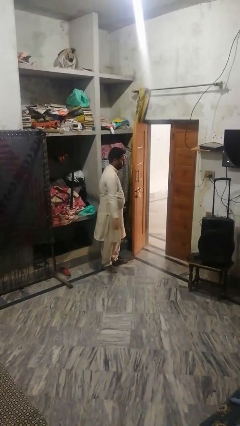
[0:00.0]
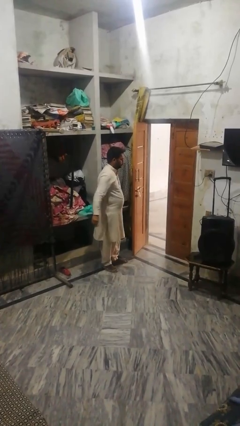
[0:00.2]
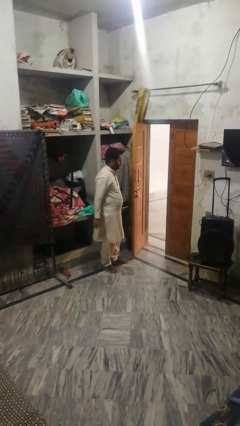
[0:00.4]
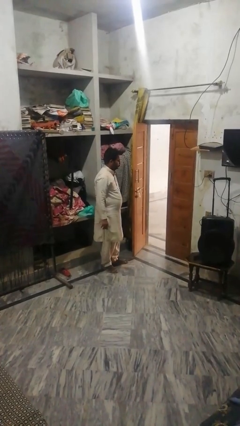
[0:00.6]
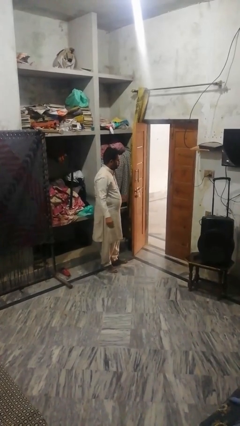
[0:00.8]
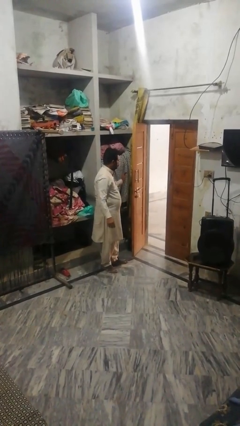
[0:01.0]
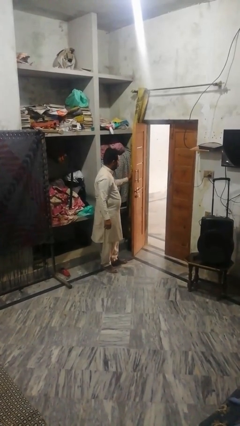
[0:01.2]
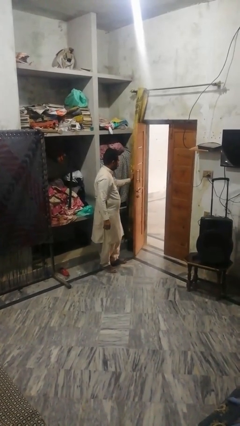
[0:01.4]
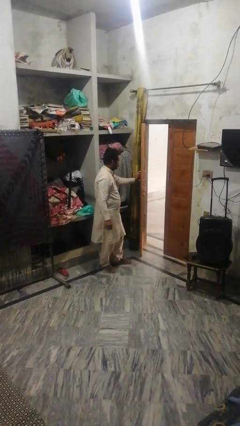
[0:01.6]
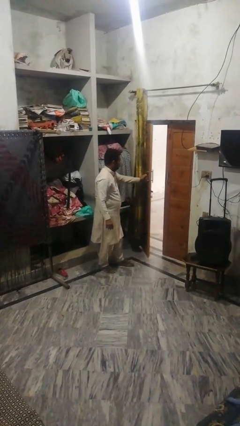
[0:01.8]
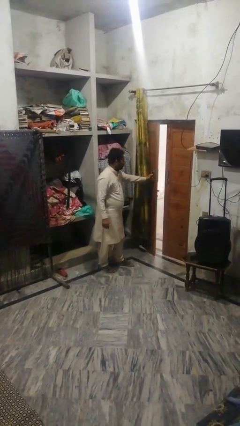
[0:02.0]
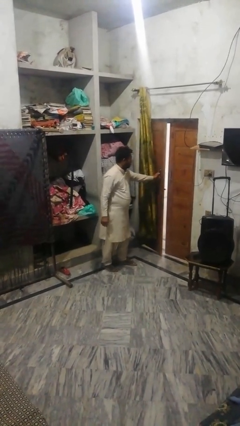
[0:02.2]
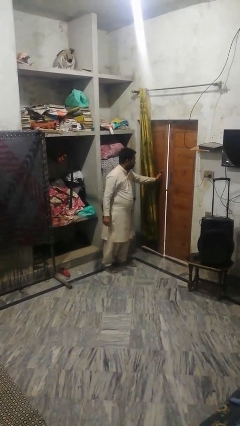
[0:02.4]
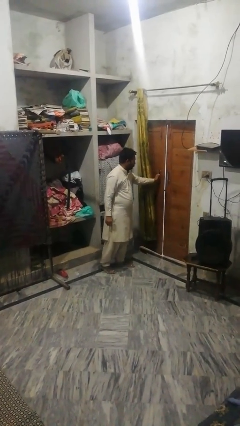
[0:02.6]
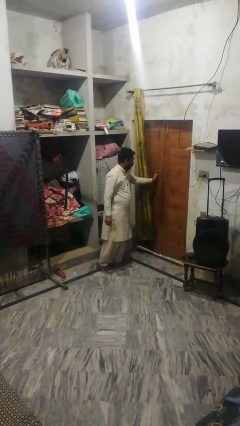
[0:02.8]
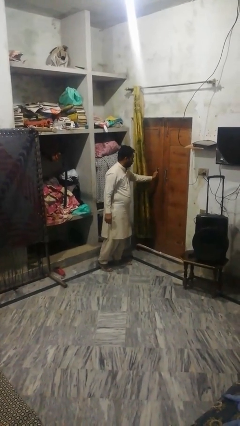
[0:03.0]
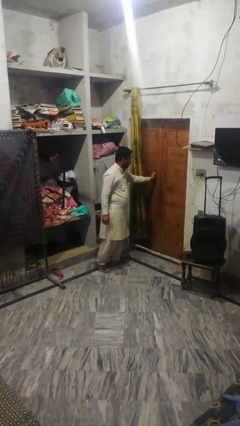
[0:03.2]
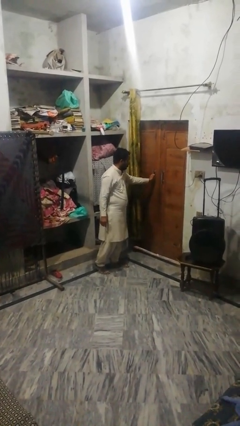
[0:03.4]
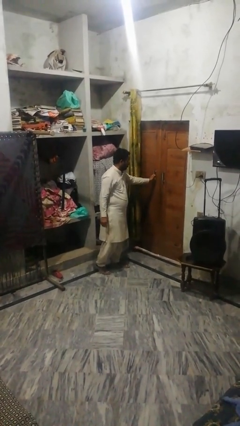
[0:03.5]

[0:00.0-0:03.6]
person closes facility door

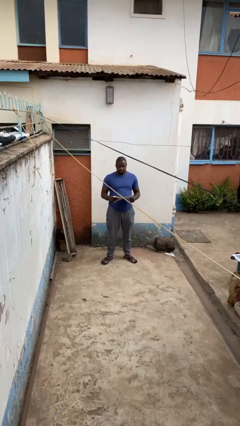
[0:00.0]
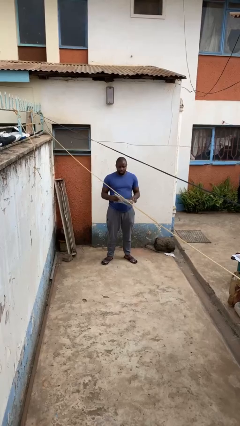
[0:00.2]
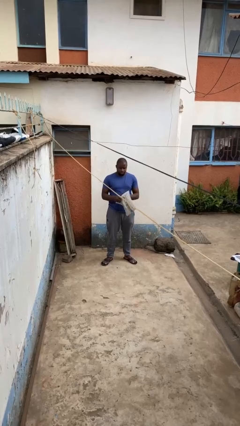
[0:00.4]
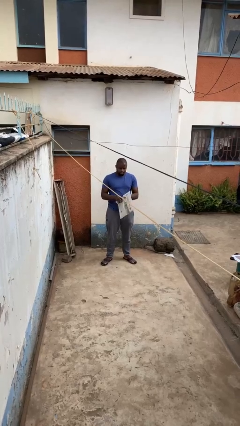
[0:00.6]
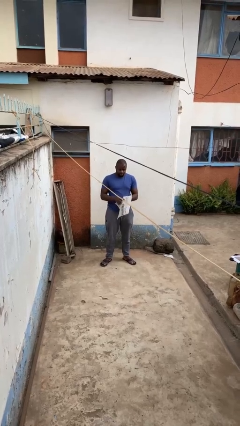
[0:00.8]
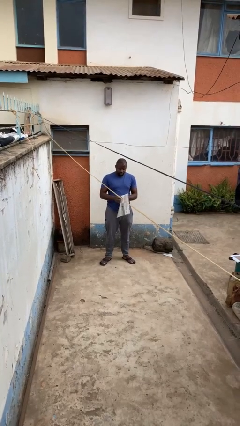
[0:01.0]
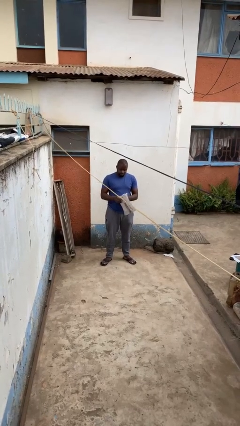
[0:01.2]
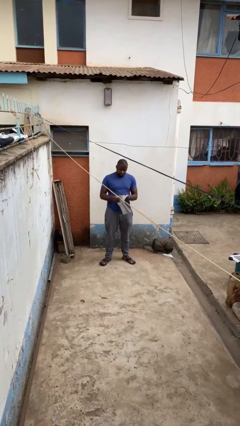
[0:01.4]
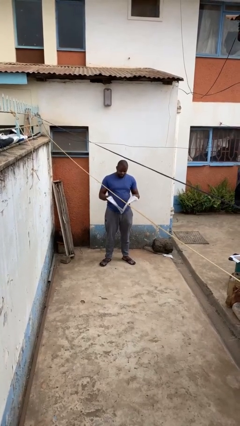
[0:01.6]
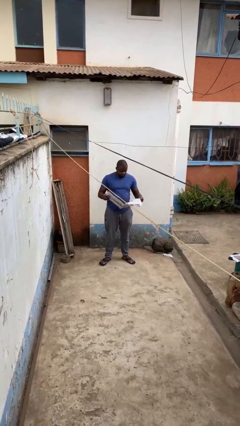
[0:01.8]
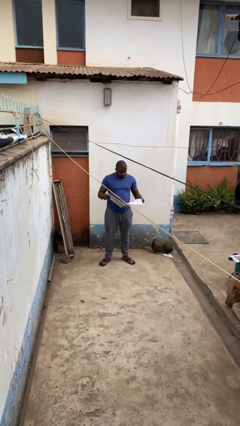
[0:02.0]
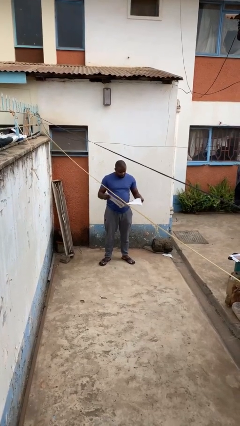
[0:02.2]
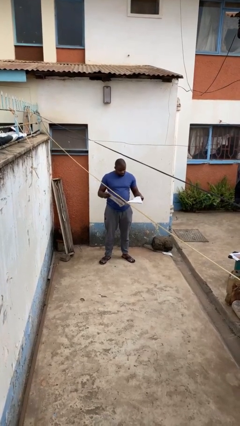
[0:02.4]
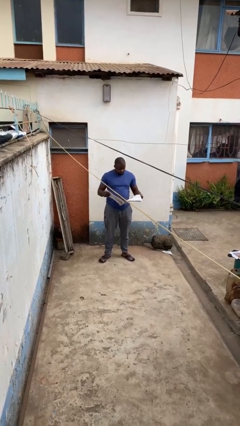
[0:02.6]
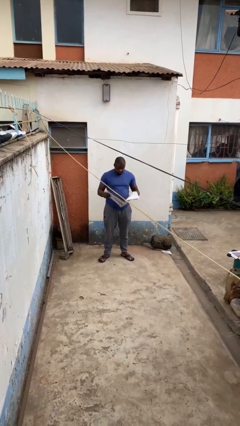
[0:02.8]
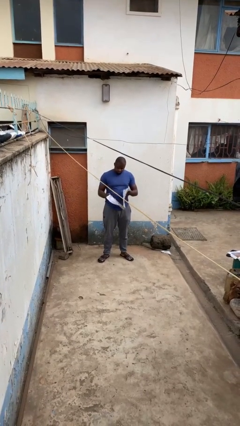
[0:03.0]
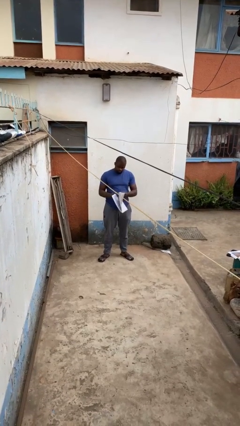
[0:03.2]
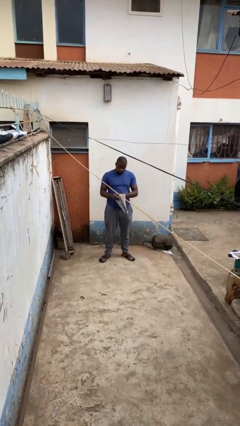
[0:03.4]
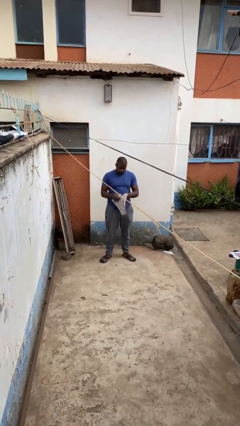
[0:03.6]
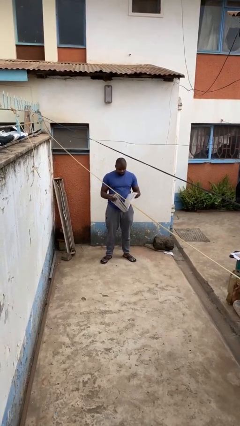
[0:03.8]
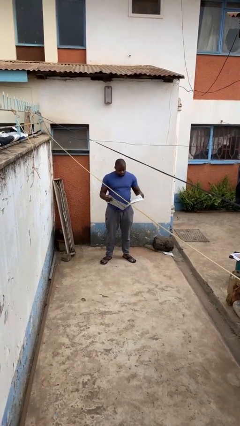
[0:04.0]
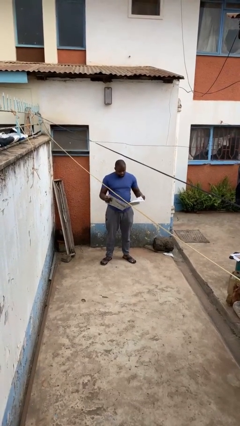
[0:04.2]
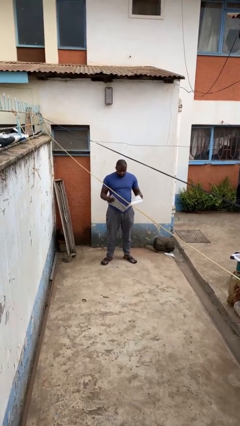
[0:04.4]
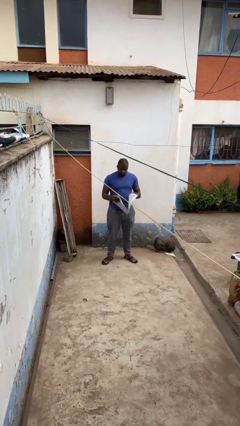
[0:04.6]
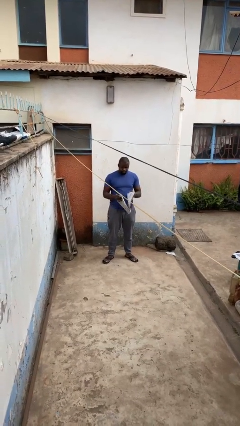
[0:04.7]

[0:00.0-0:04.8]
person reads newspaper

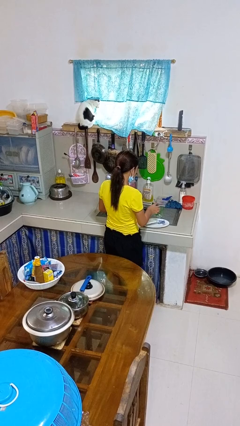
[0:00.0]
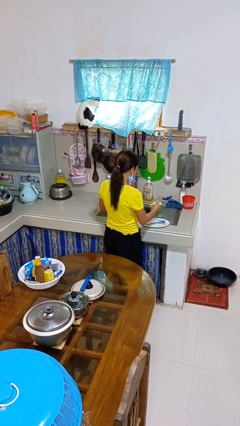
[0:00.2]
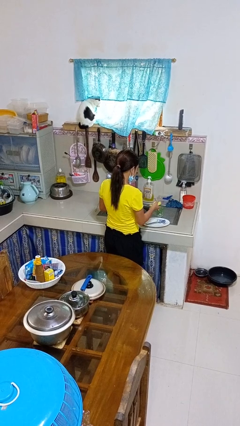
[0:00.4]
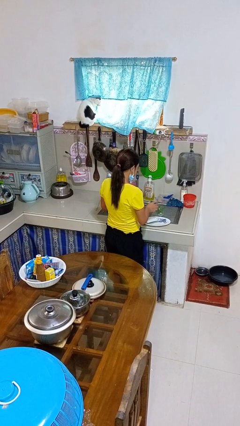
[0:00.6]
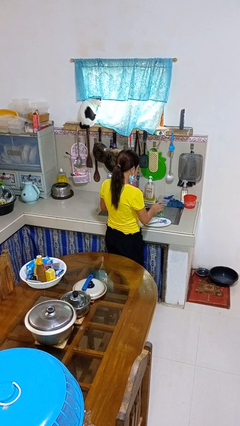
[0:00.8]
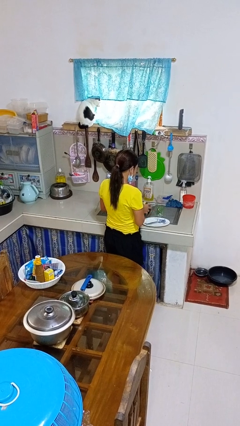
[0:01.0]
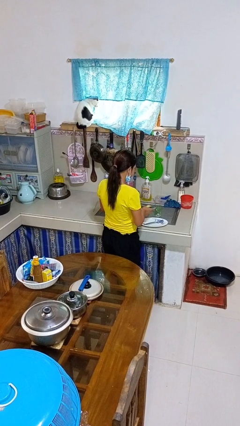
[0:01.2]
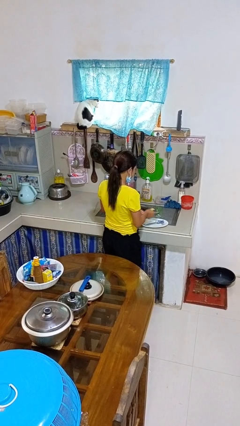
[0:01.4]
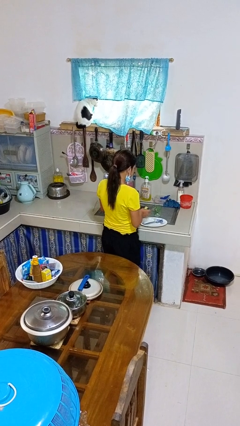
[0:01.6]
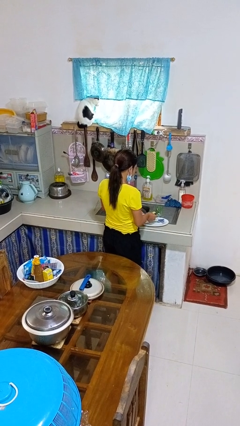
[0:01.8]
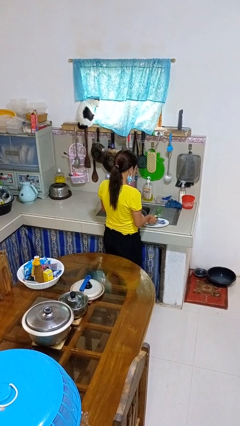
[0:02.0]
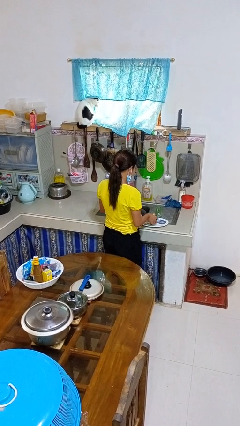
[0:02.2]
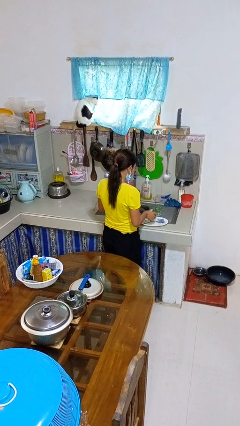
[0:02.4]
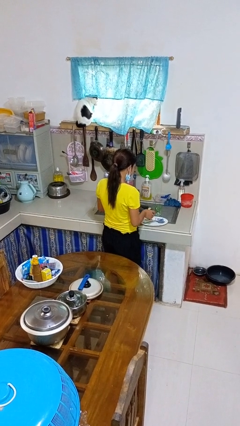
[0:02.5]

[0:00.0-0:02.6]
person washes dish

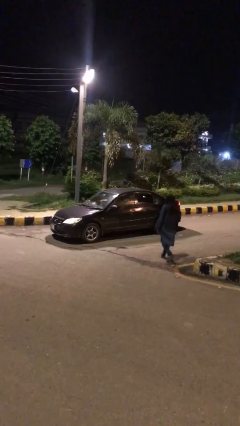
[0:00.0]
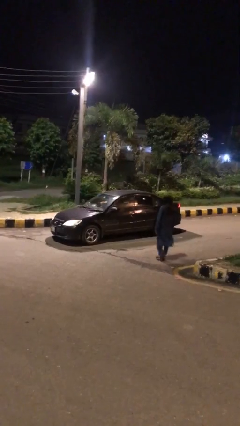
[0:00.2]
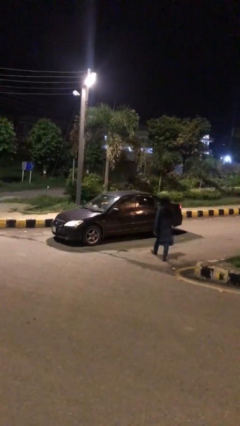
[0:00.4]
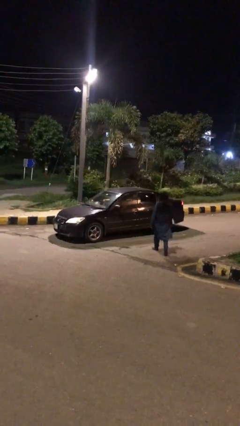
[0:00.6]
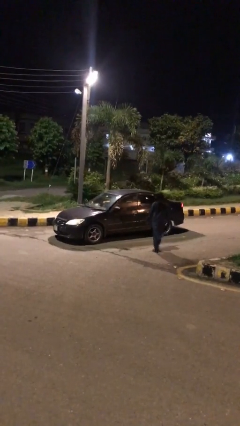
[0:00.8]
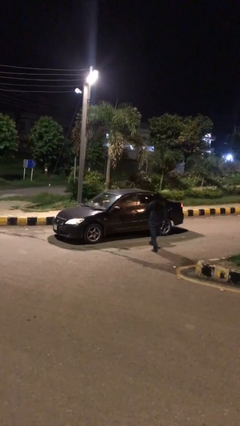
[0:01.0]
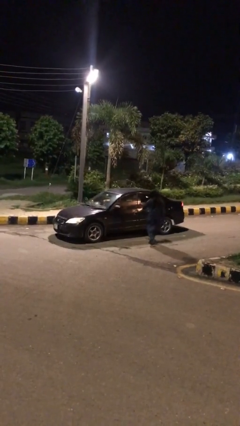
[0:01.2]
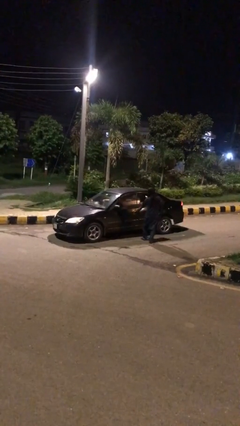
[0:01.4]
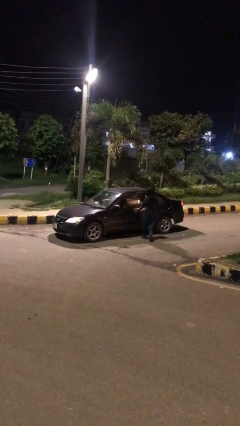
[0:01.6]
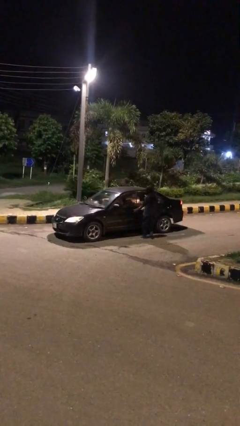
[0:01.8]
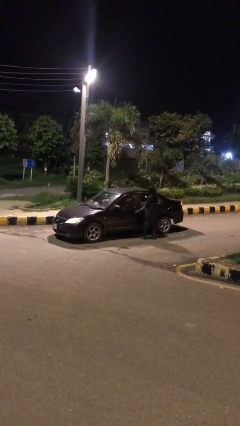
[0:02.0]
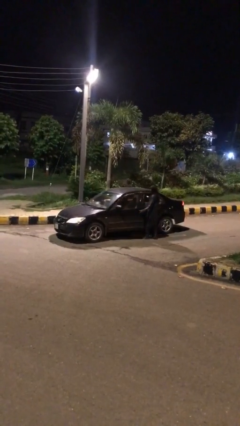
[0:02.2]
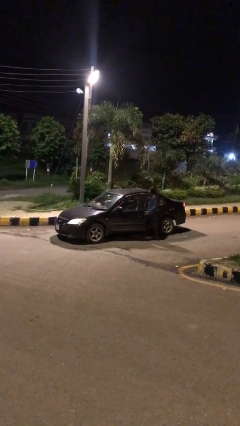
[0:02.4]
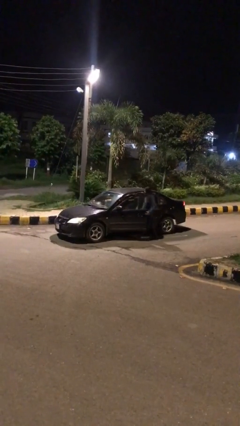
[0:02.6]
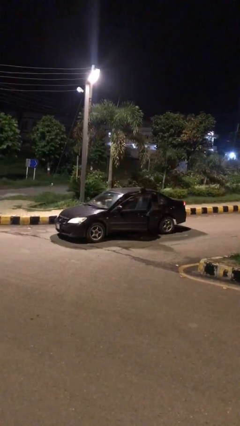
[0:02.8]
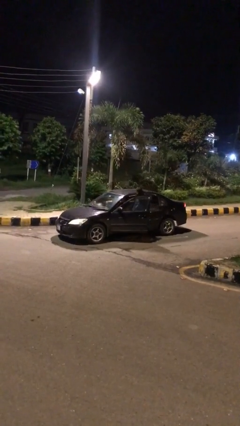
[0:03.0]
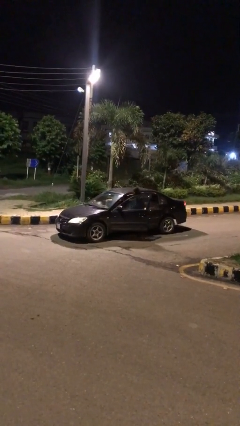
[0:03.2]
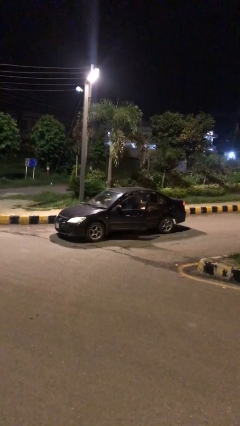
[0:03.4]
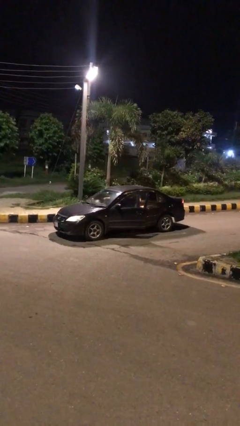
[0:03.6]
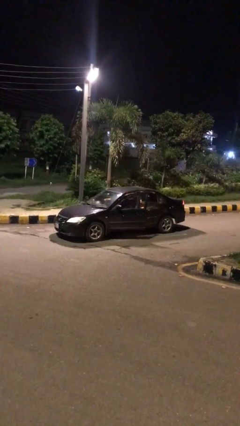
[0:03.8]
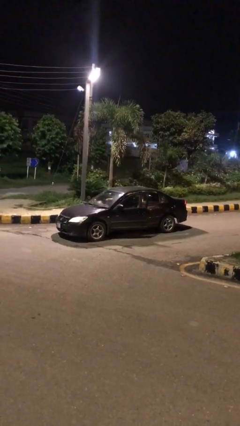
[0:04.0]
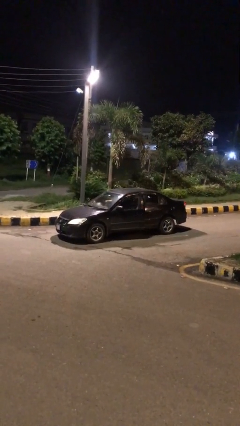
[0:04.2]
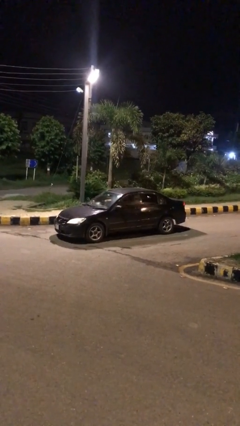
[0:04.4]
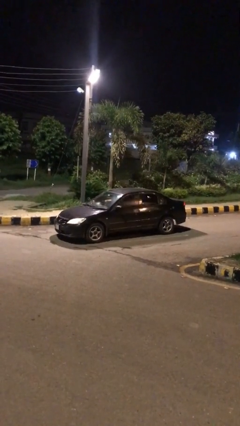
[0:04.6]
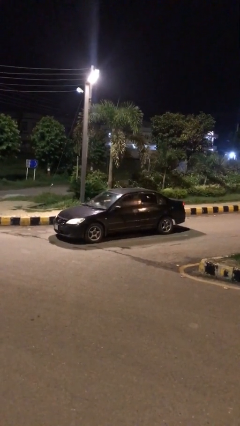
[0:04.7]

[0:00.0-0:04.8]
car picks up person

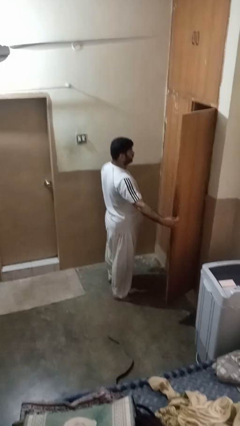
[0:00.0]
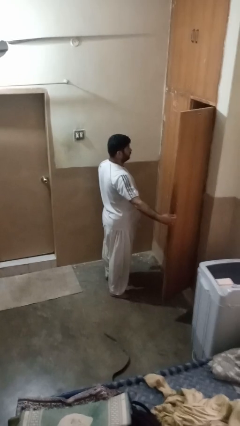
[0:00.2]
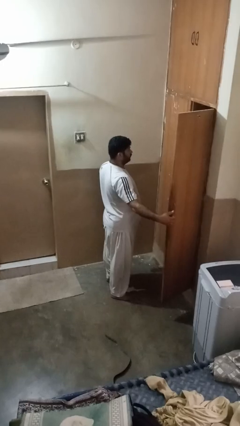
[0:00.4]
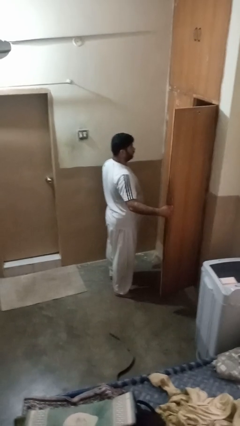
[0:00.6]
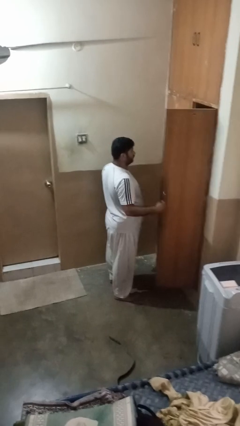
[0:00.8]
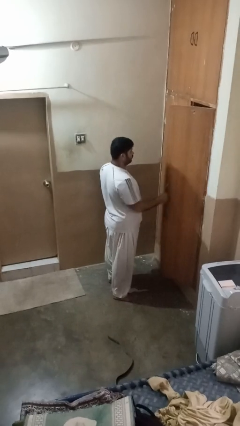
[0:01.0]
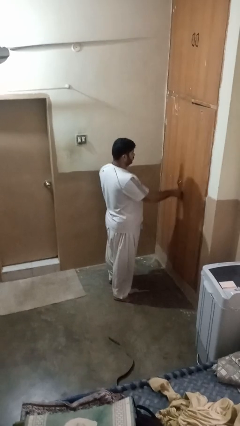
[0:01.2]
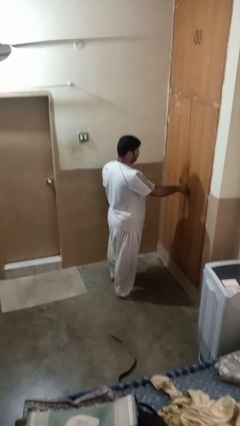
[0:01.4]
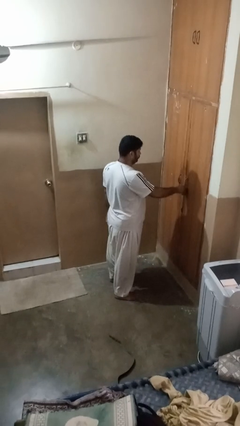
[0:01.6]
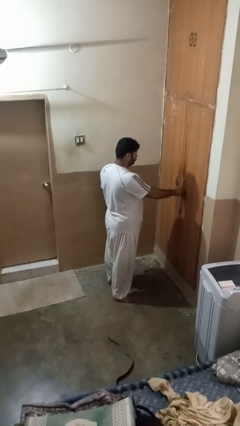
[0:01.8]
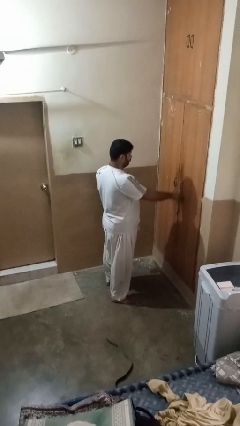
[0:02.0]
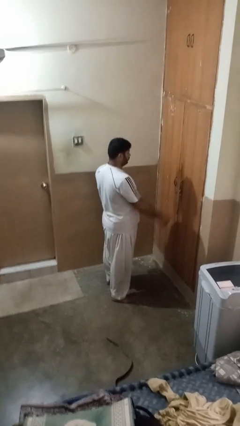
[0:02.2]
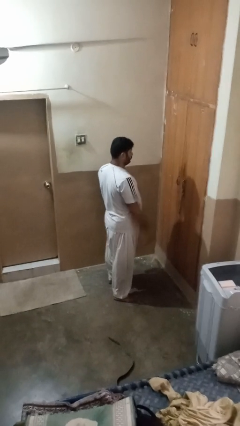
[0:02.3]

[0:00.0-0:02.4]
person closes closet door
